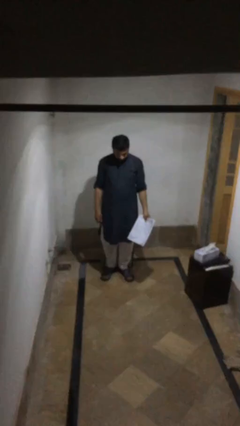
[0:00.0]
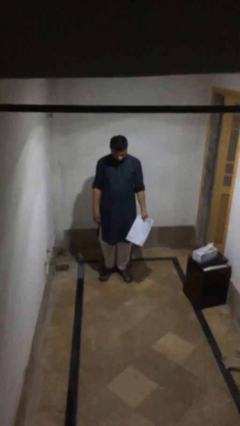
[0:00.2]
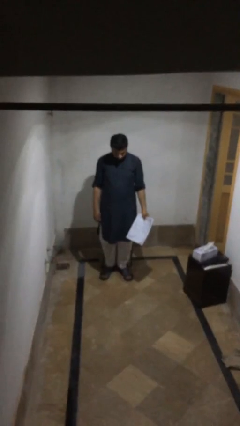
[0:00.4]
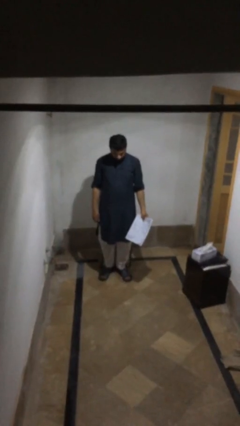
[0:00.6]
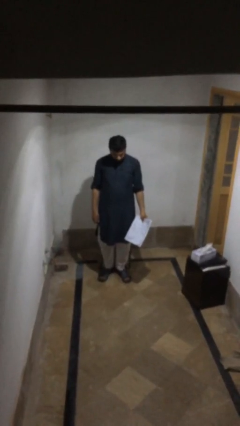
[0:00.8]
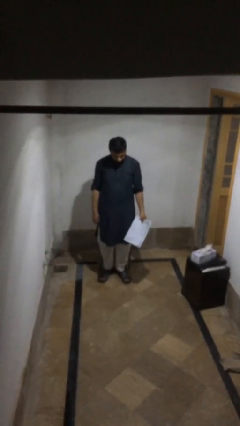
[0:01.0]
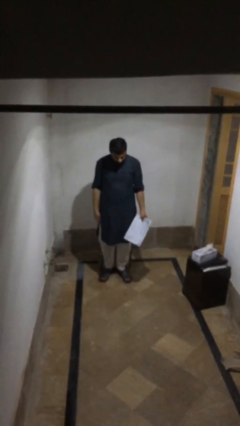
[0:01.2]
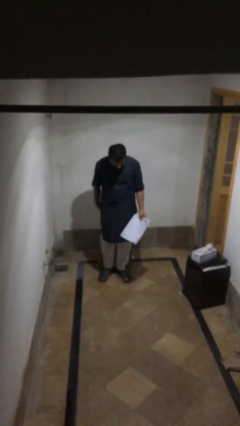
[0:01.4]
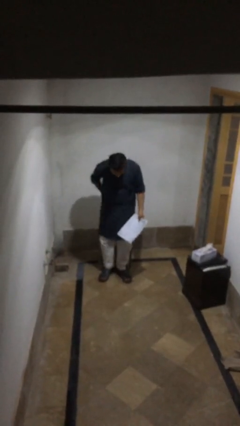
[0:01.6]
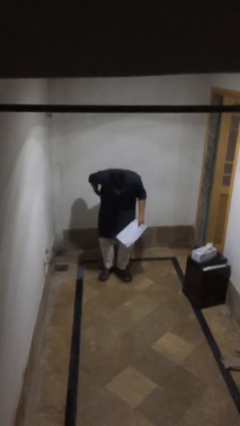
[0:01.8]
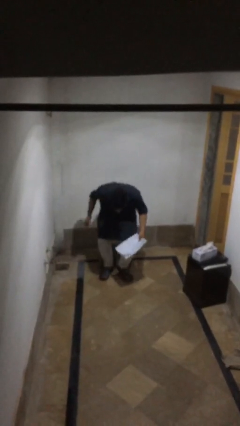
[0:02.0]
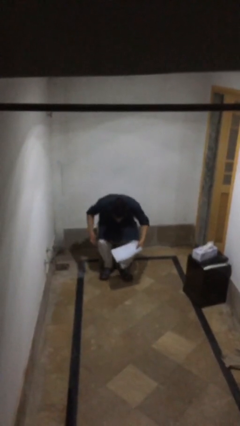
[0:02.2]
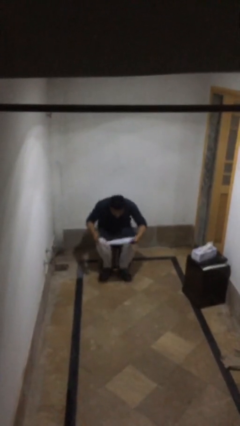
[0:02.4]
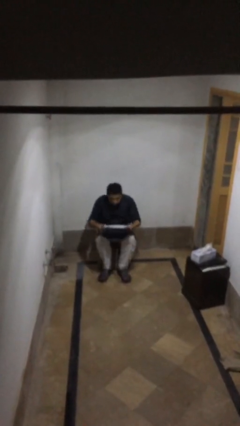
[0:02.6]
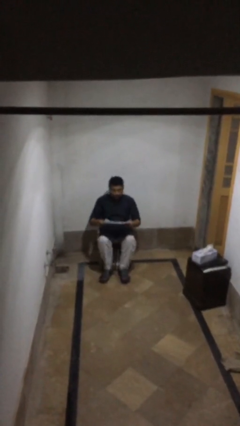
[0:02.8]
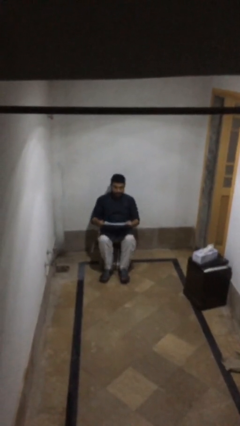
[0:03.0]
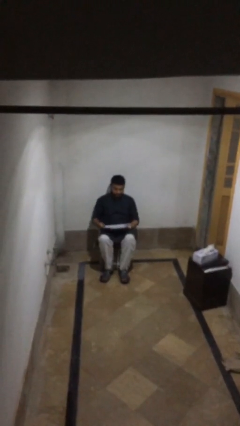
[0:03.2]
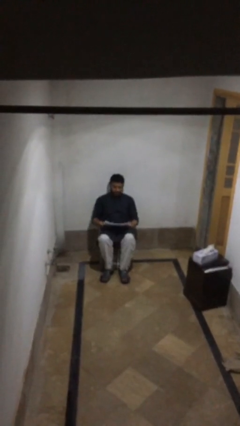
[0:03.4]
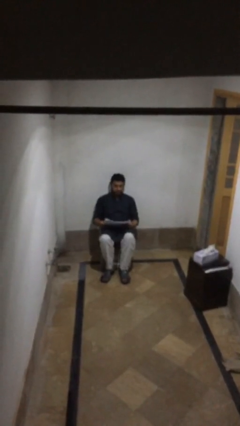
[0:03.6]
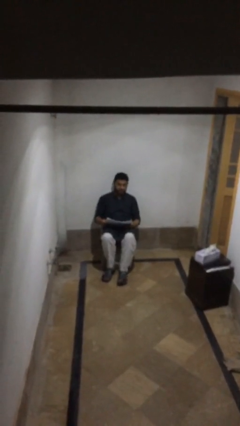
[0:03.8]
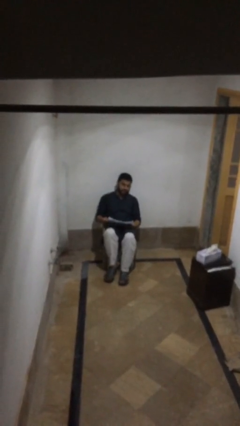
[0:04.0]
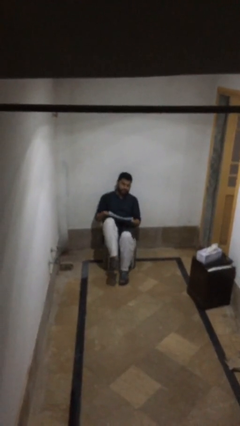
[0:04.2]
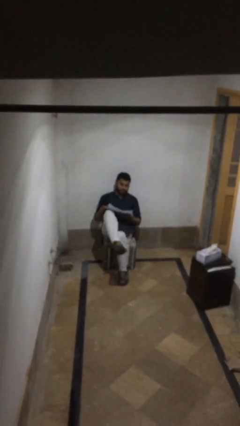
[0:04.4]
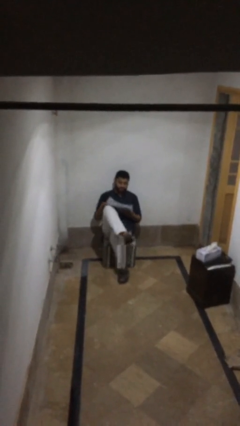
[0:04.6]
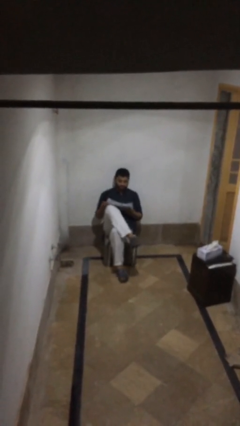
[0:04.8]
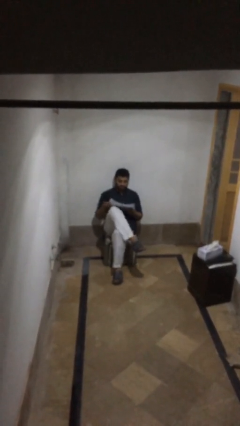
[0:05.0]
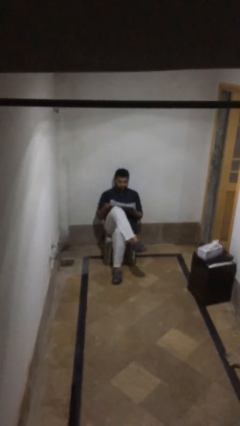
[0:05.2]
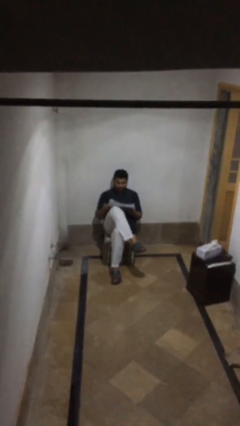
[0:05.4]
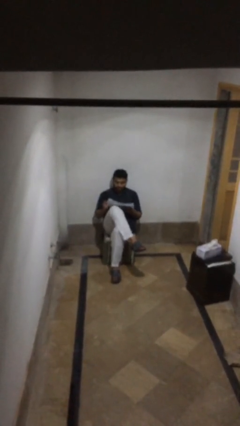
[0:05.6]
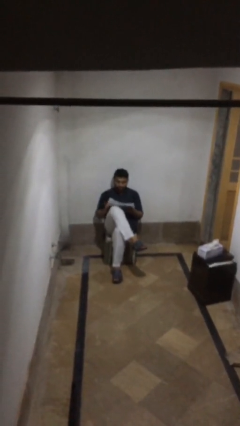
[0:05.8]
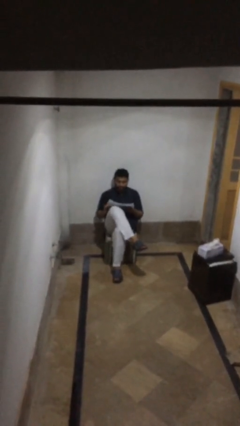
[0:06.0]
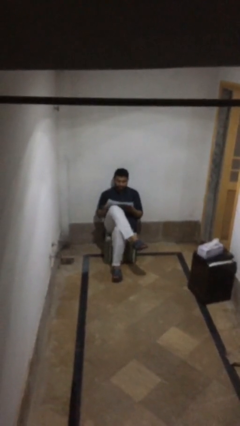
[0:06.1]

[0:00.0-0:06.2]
person sits down

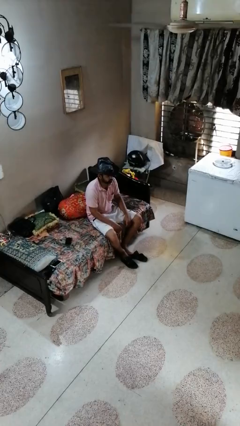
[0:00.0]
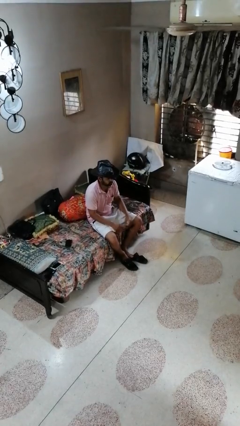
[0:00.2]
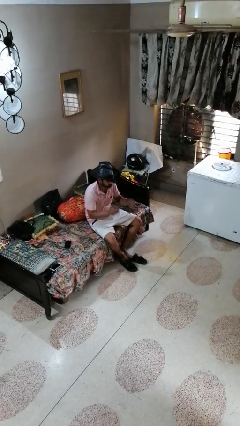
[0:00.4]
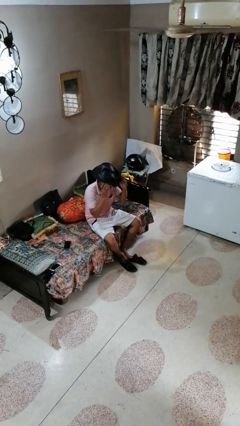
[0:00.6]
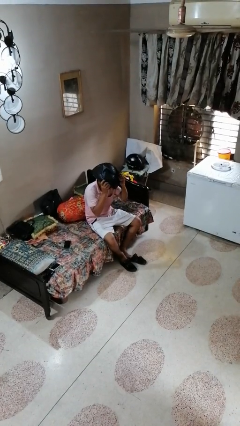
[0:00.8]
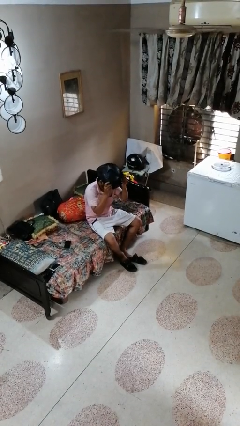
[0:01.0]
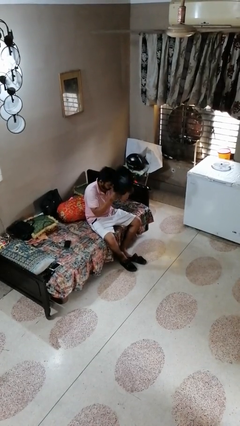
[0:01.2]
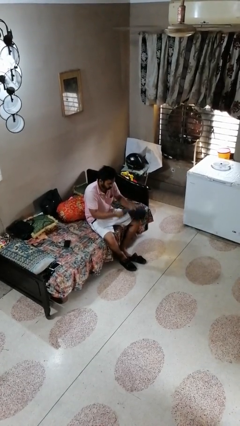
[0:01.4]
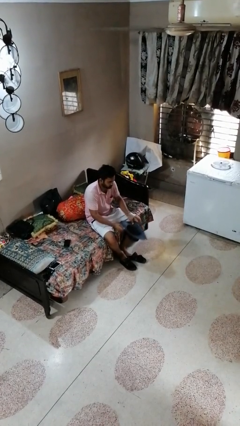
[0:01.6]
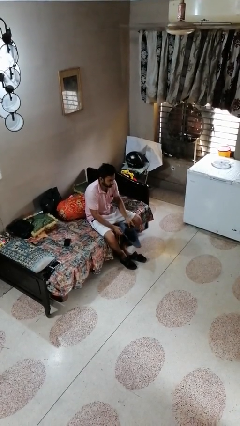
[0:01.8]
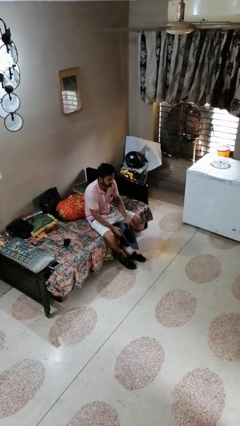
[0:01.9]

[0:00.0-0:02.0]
person takes off hat

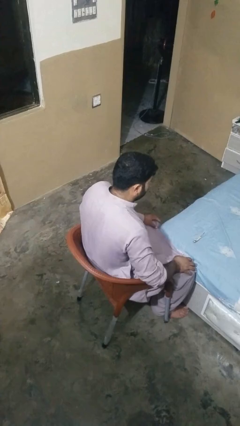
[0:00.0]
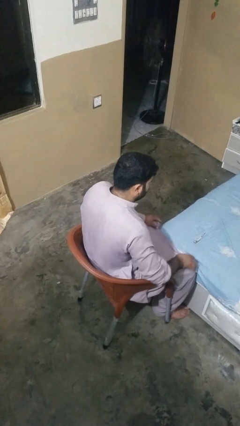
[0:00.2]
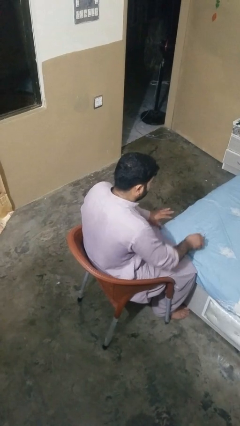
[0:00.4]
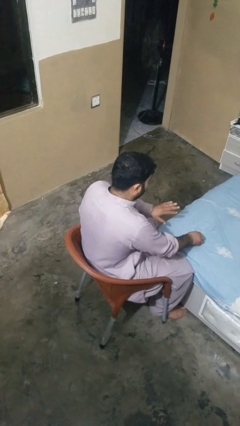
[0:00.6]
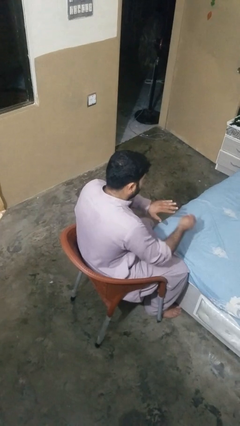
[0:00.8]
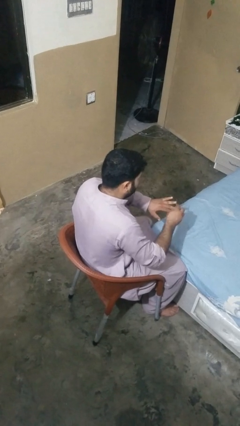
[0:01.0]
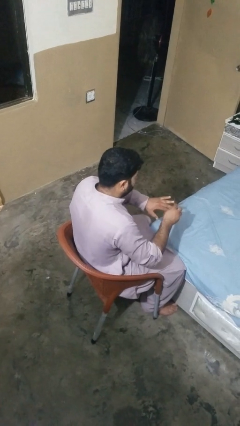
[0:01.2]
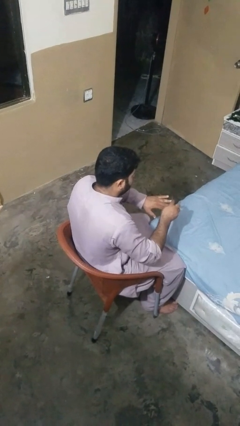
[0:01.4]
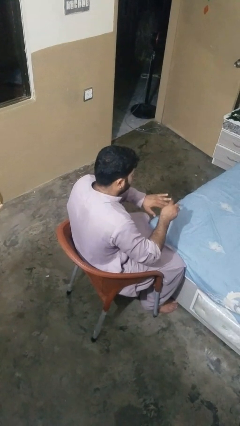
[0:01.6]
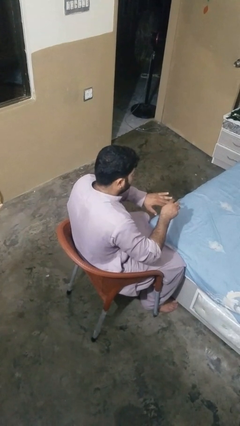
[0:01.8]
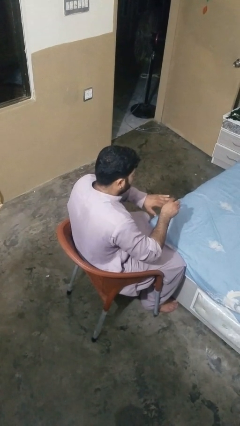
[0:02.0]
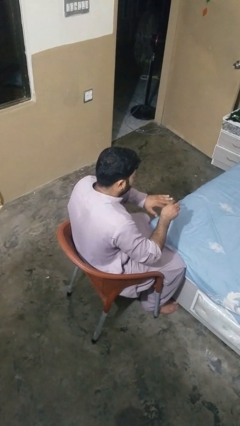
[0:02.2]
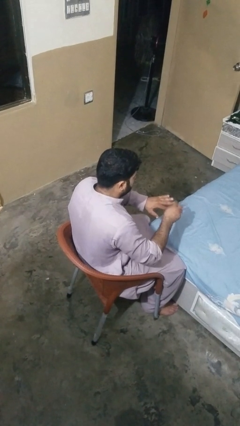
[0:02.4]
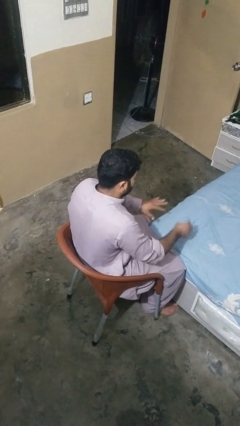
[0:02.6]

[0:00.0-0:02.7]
person files fingernails

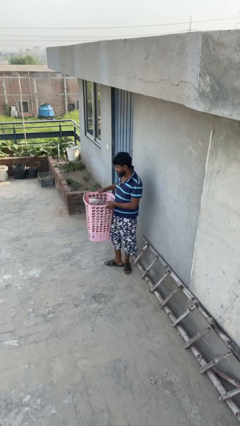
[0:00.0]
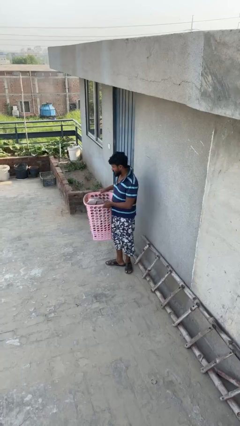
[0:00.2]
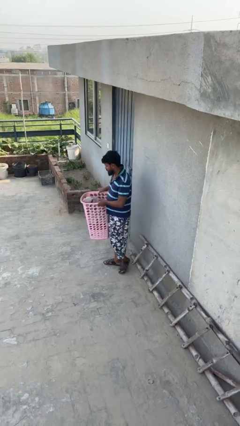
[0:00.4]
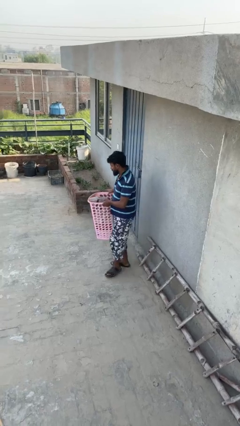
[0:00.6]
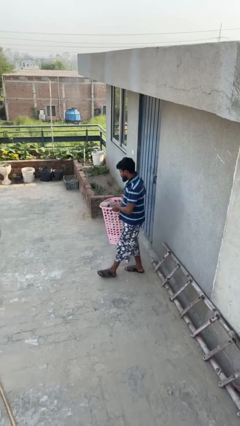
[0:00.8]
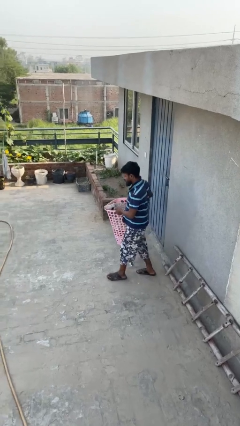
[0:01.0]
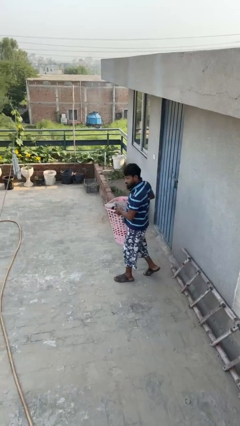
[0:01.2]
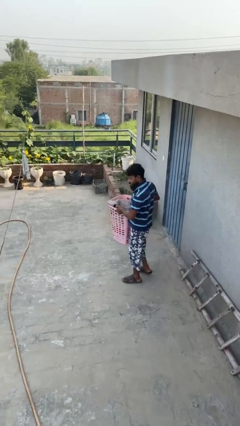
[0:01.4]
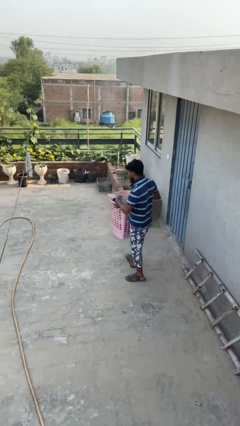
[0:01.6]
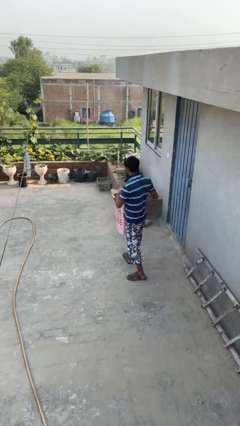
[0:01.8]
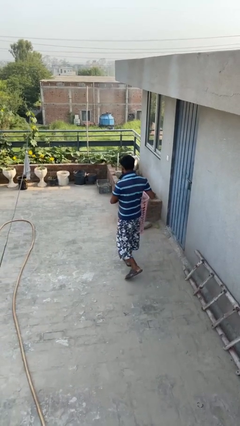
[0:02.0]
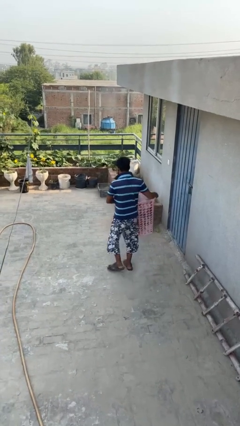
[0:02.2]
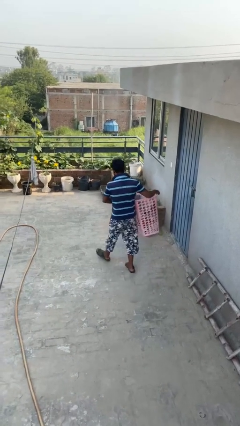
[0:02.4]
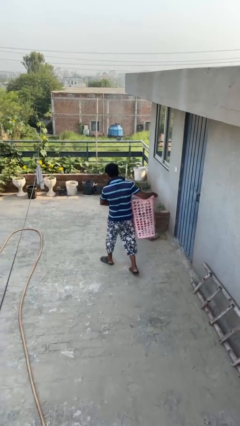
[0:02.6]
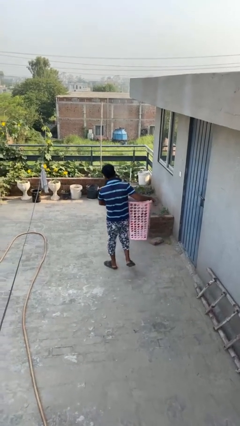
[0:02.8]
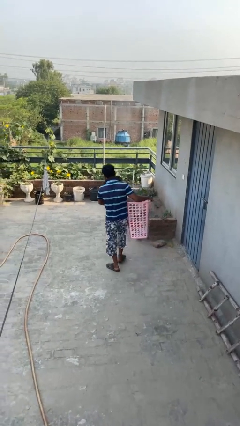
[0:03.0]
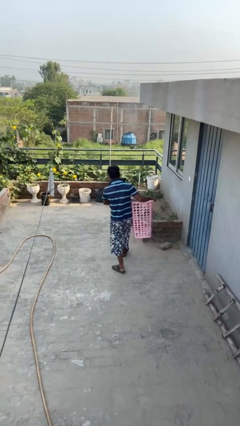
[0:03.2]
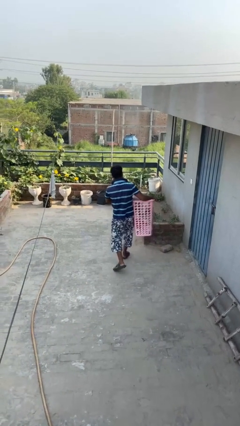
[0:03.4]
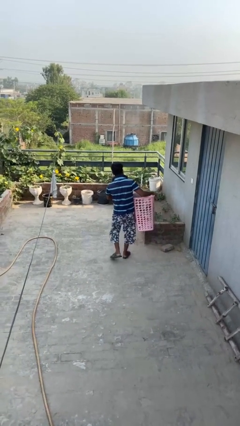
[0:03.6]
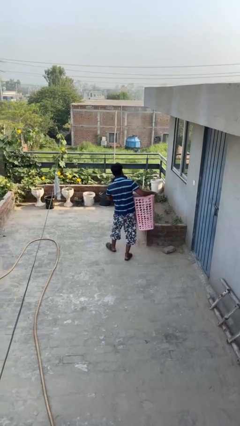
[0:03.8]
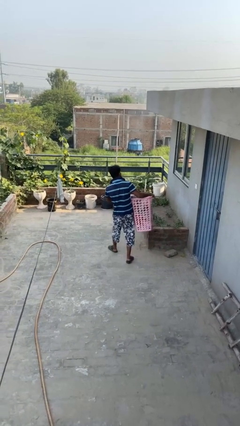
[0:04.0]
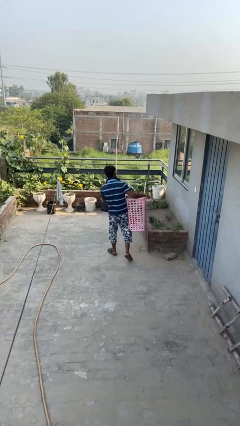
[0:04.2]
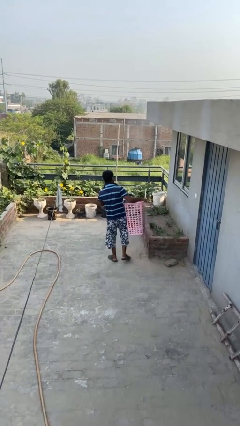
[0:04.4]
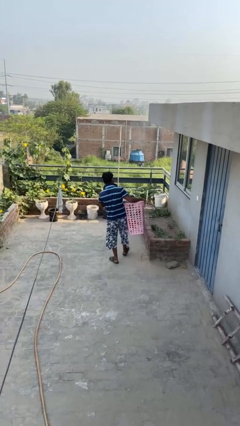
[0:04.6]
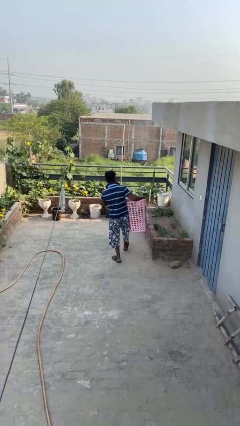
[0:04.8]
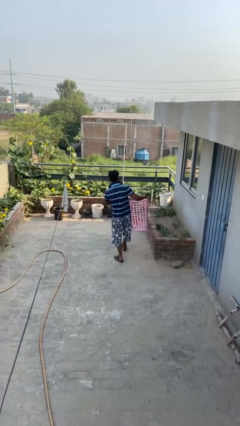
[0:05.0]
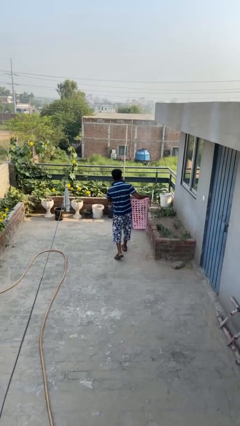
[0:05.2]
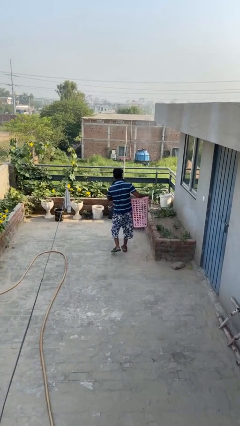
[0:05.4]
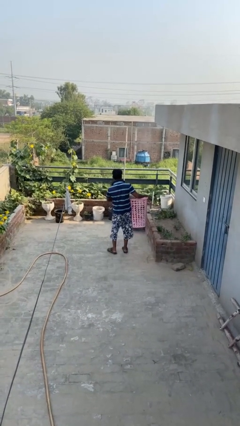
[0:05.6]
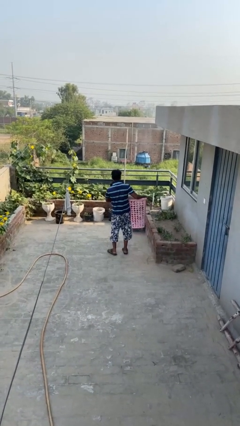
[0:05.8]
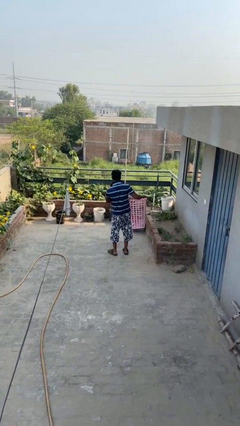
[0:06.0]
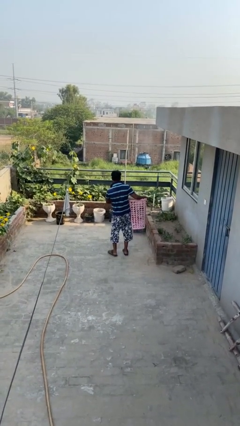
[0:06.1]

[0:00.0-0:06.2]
person carries laundry basket

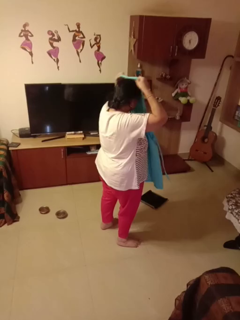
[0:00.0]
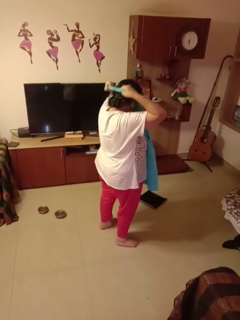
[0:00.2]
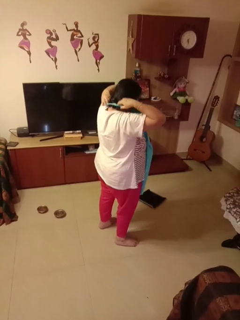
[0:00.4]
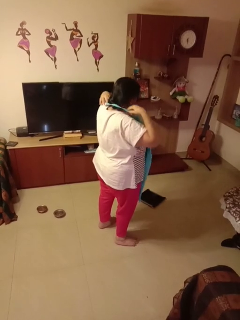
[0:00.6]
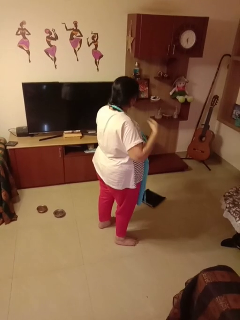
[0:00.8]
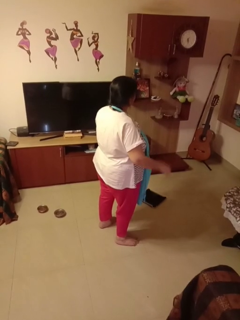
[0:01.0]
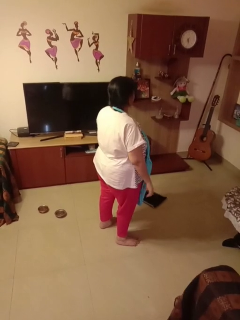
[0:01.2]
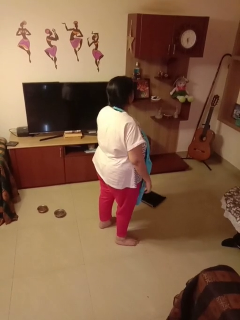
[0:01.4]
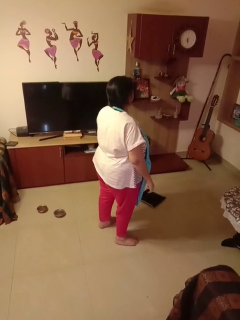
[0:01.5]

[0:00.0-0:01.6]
person puts on apron
